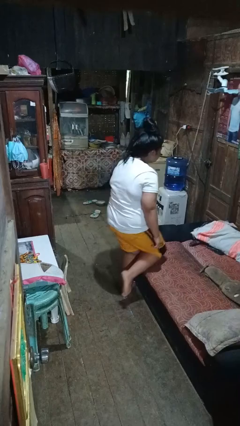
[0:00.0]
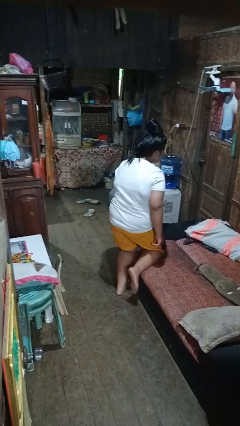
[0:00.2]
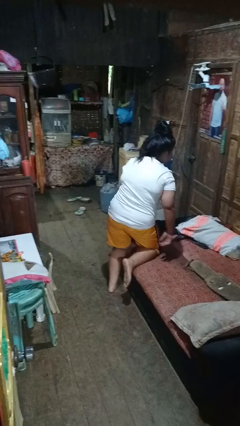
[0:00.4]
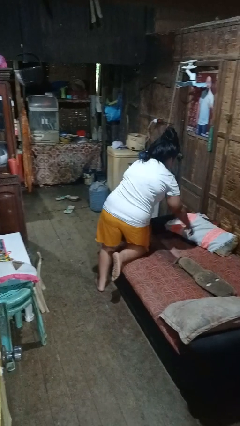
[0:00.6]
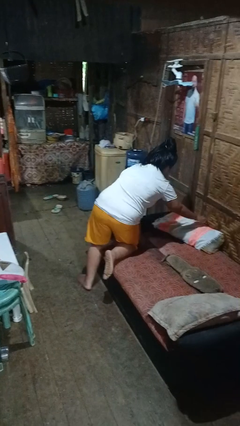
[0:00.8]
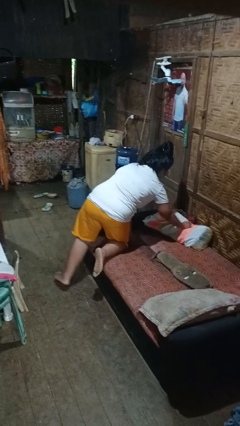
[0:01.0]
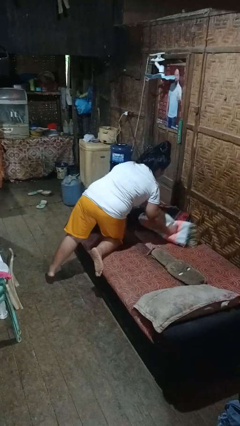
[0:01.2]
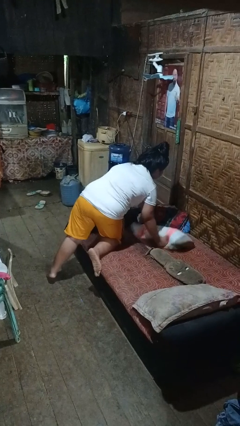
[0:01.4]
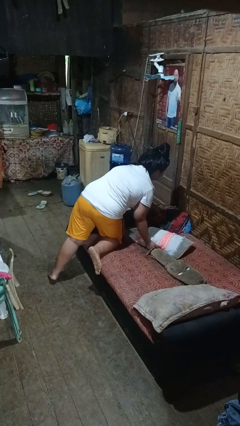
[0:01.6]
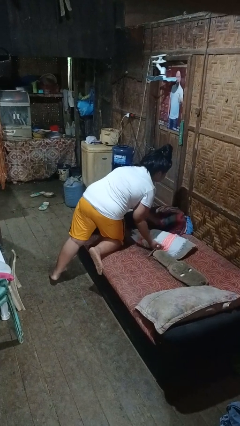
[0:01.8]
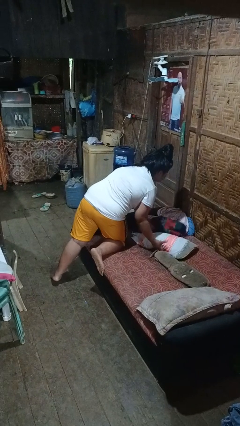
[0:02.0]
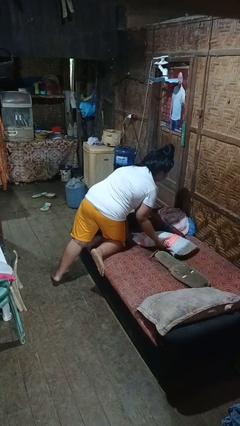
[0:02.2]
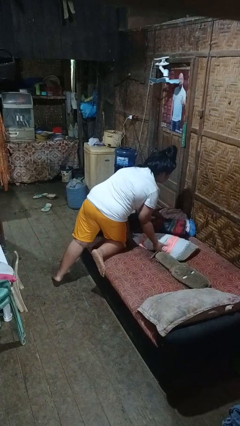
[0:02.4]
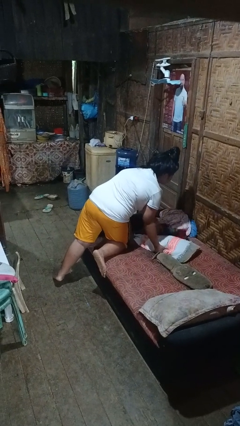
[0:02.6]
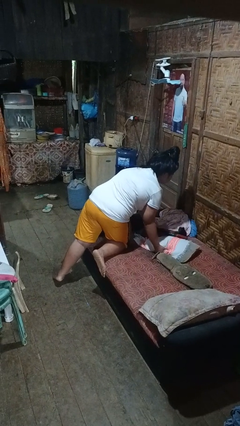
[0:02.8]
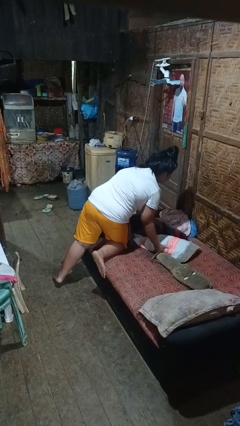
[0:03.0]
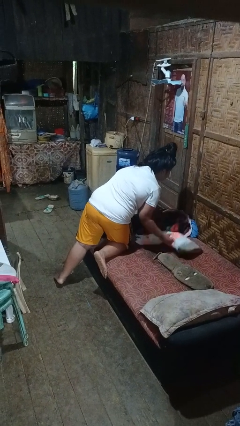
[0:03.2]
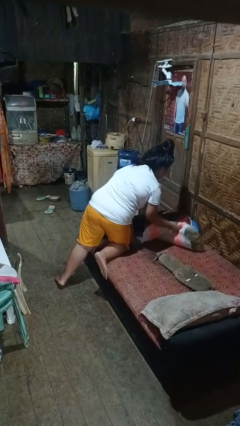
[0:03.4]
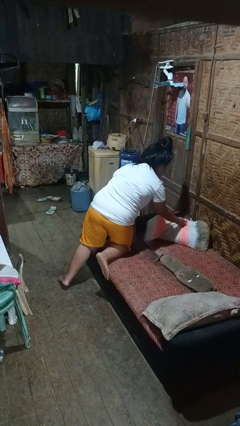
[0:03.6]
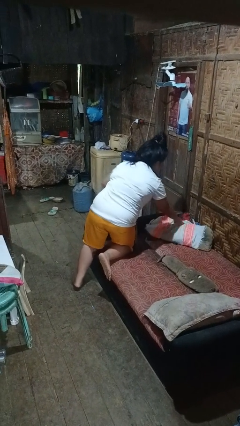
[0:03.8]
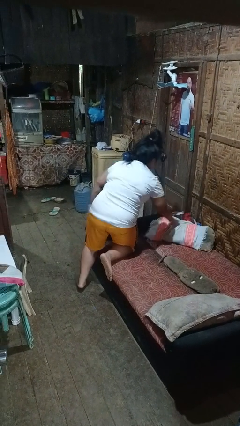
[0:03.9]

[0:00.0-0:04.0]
person searches in couch

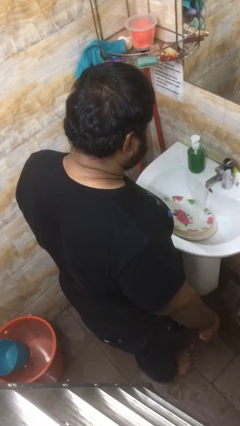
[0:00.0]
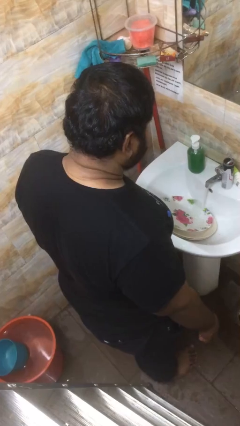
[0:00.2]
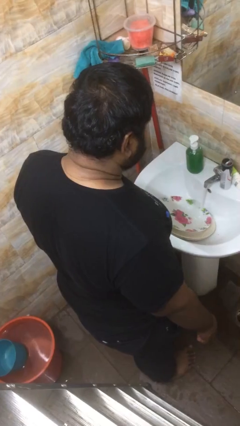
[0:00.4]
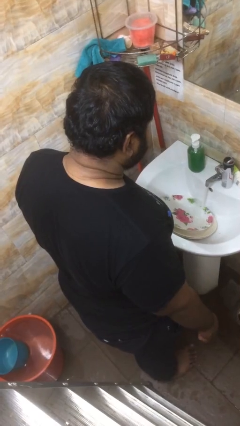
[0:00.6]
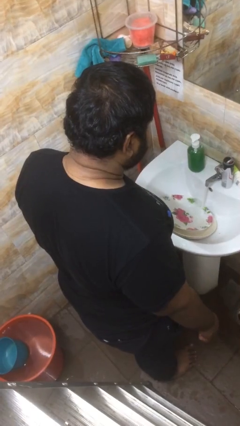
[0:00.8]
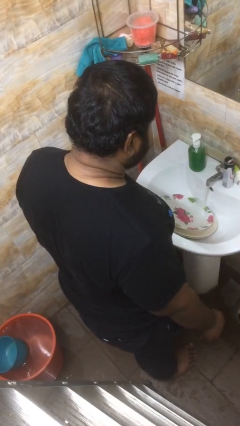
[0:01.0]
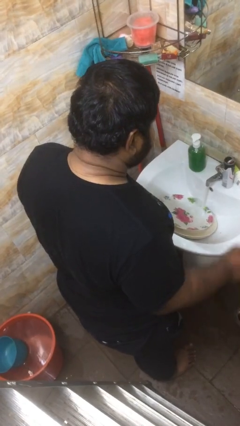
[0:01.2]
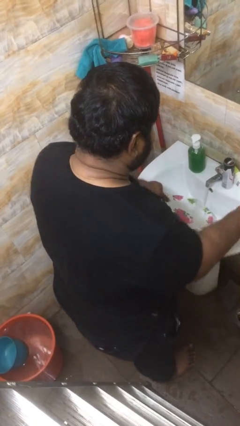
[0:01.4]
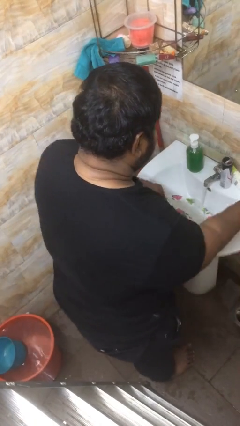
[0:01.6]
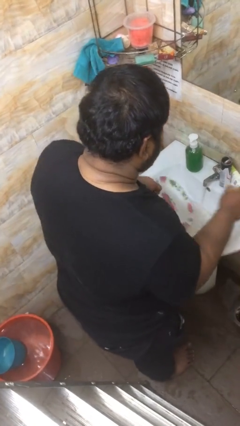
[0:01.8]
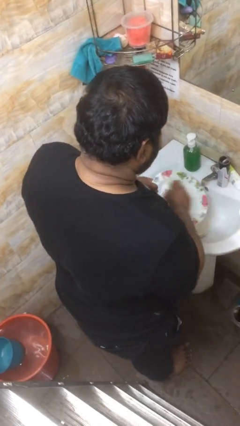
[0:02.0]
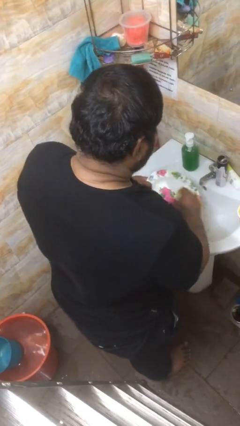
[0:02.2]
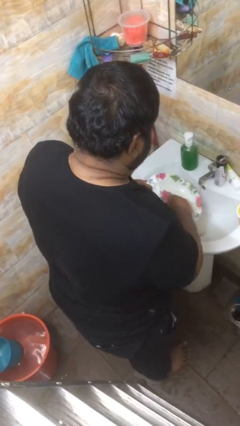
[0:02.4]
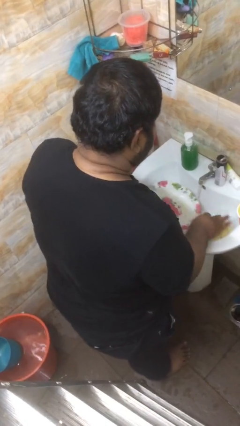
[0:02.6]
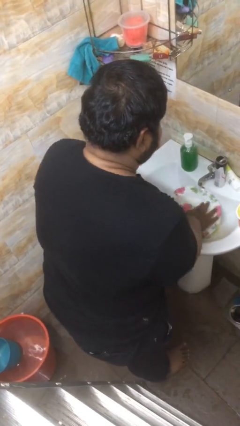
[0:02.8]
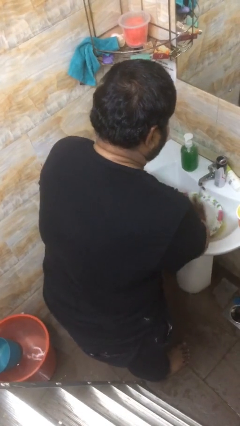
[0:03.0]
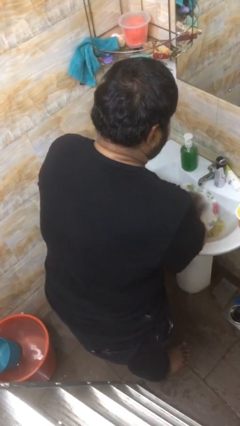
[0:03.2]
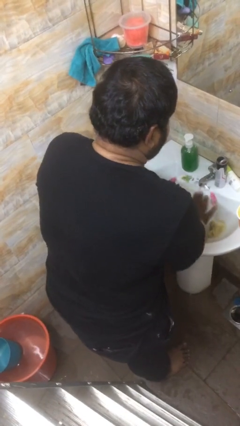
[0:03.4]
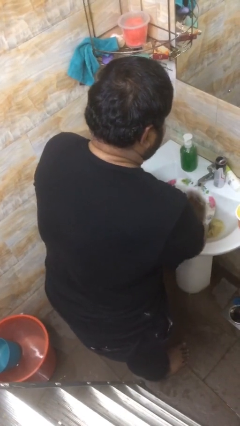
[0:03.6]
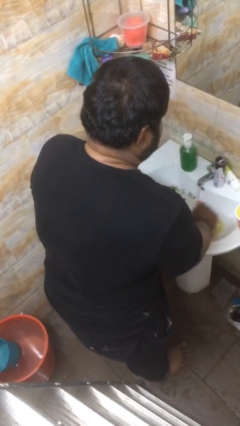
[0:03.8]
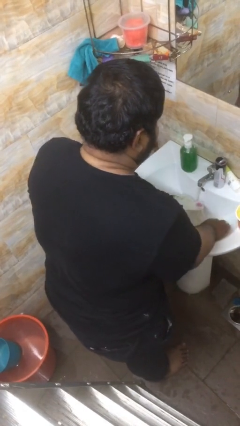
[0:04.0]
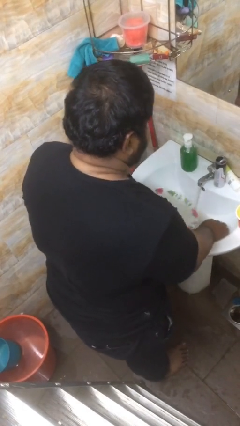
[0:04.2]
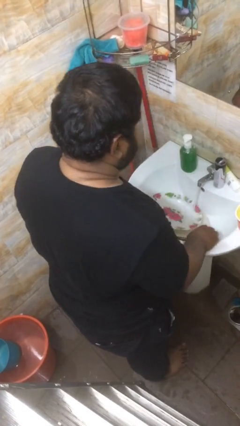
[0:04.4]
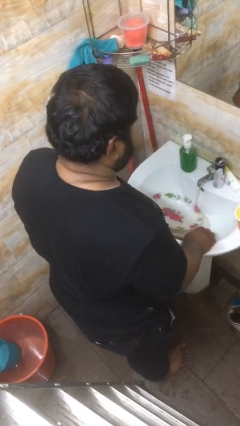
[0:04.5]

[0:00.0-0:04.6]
person washes dish

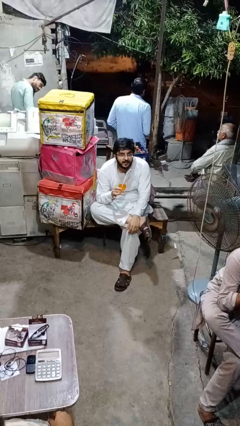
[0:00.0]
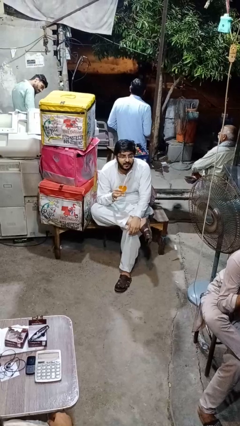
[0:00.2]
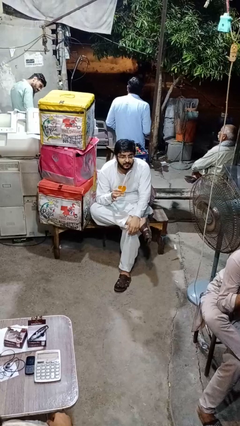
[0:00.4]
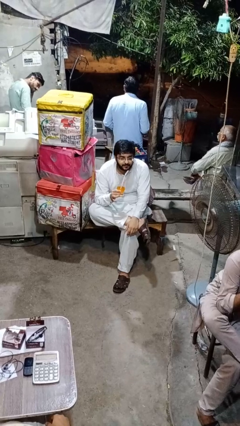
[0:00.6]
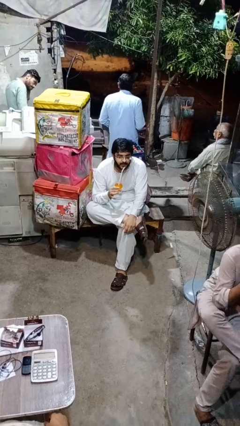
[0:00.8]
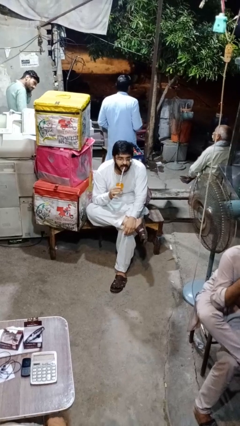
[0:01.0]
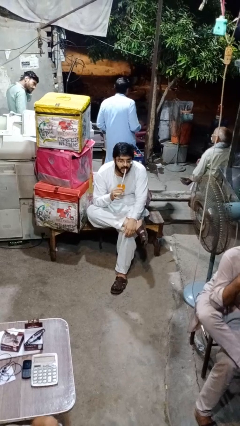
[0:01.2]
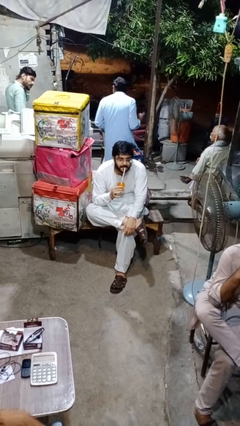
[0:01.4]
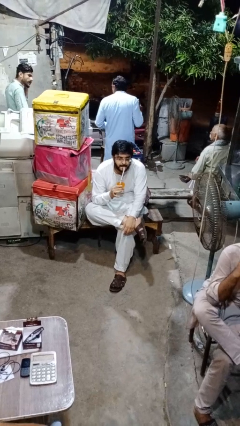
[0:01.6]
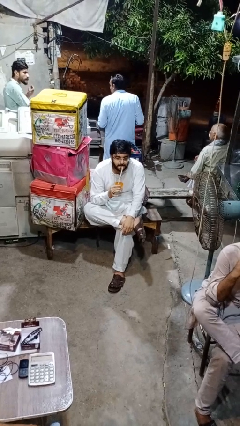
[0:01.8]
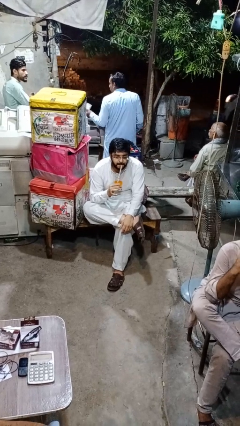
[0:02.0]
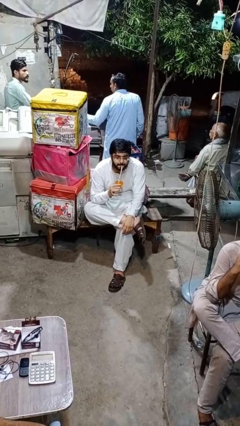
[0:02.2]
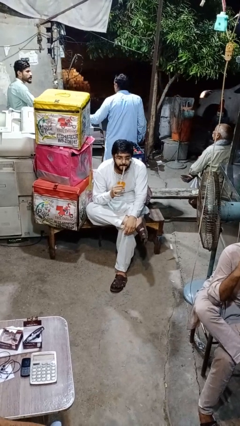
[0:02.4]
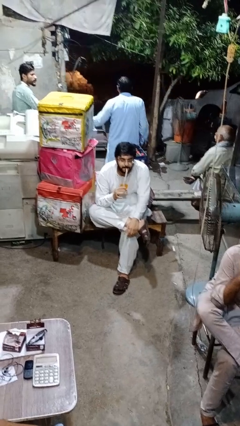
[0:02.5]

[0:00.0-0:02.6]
person drinks from straw

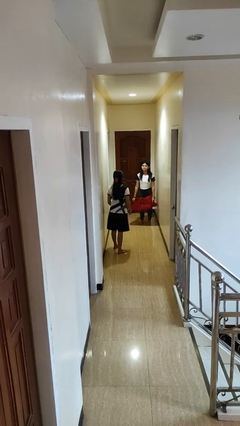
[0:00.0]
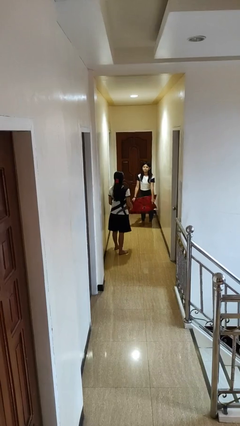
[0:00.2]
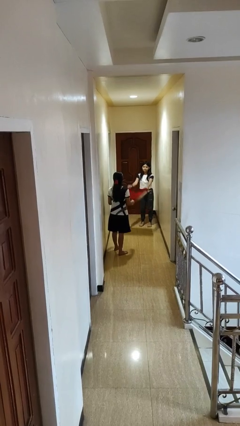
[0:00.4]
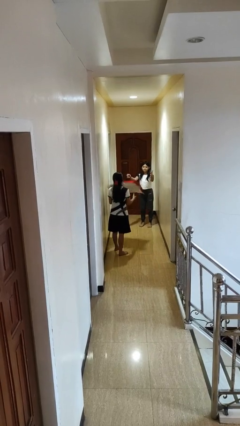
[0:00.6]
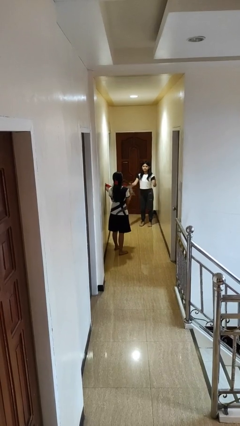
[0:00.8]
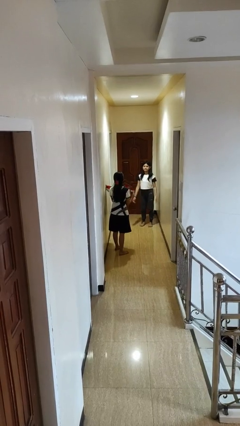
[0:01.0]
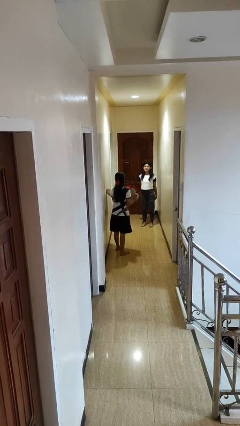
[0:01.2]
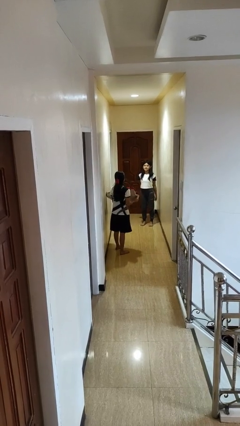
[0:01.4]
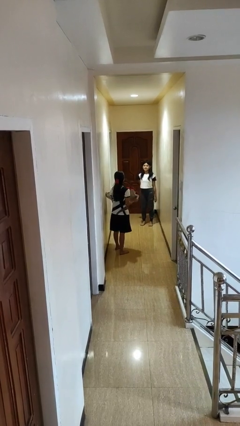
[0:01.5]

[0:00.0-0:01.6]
person catches object from person

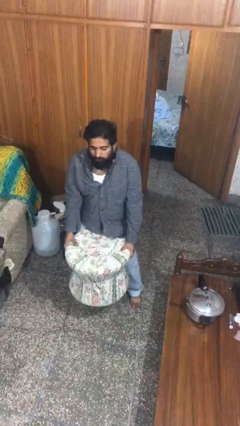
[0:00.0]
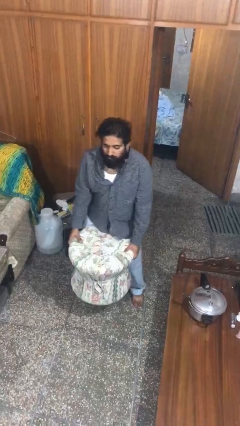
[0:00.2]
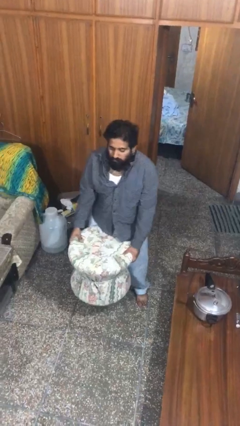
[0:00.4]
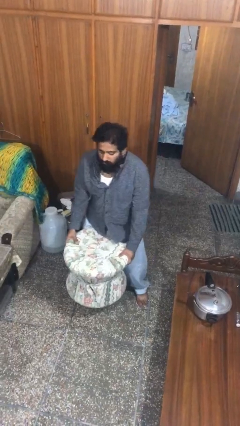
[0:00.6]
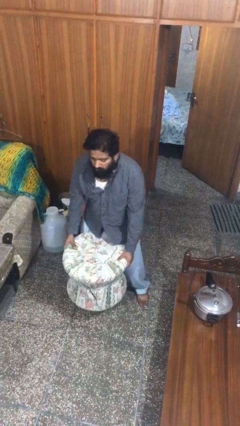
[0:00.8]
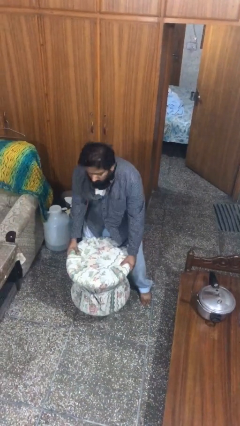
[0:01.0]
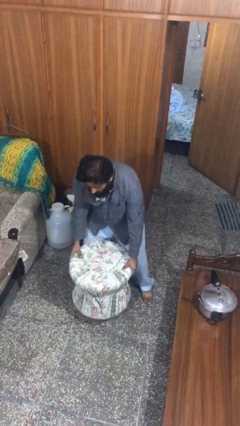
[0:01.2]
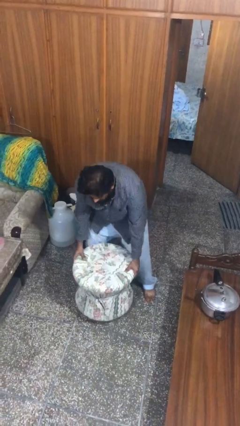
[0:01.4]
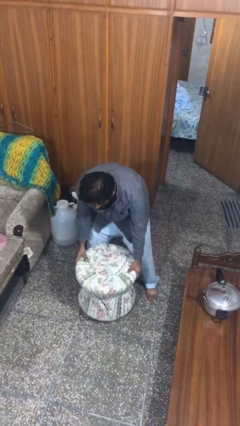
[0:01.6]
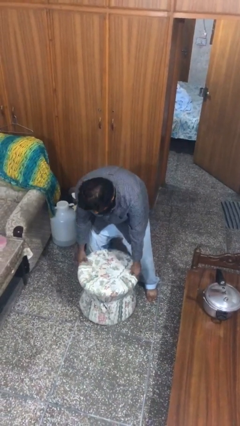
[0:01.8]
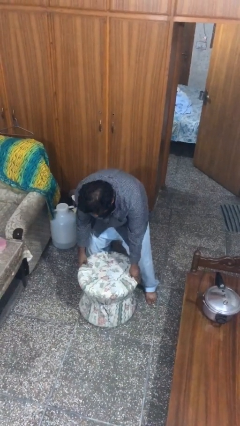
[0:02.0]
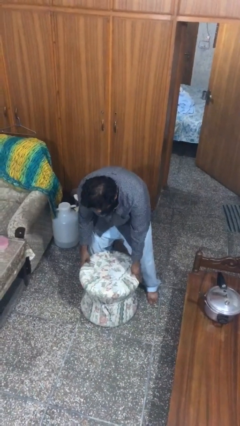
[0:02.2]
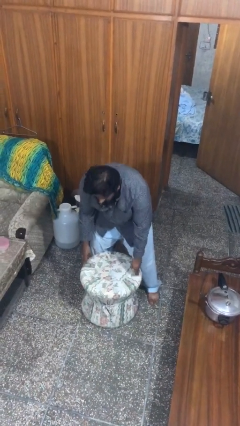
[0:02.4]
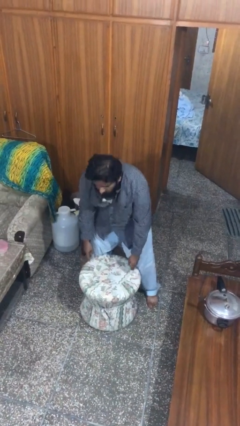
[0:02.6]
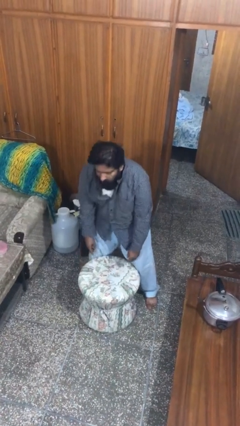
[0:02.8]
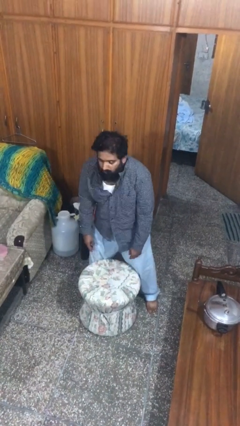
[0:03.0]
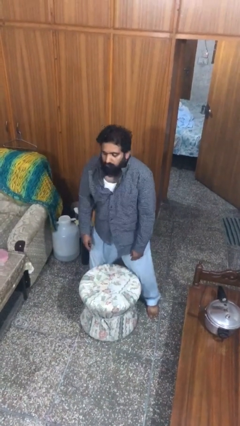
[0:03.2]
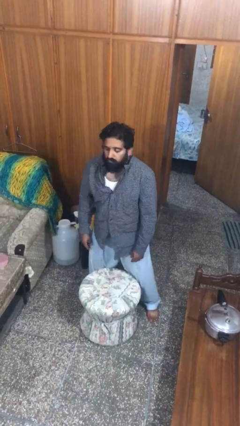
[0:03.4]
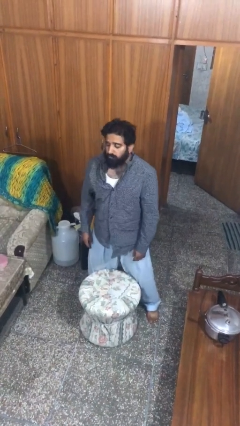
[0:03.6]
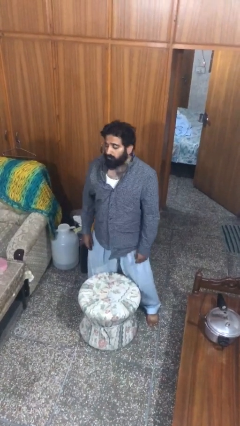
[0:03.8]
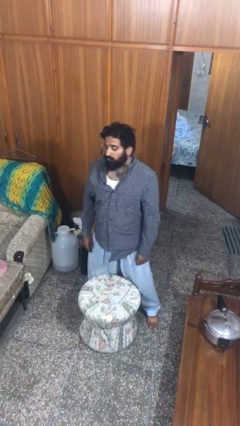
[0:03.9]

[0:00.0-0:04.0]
person puts down object on floor

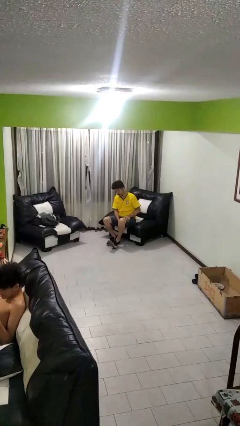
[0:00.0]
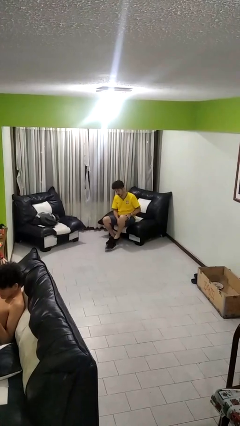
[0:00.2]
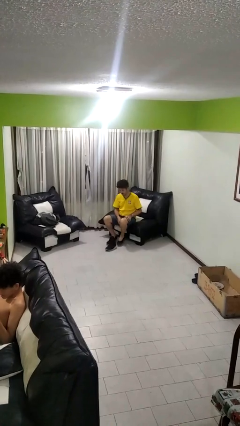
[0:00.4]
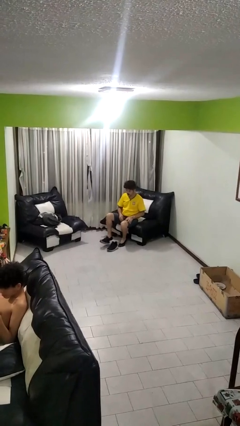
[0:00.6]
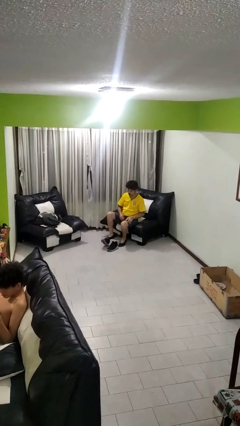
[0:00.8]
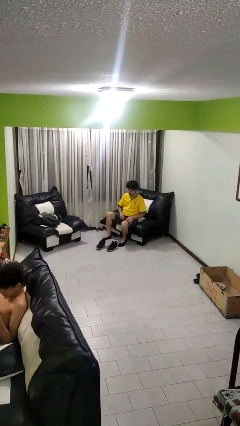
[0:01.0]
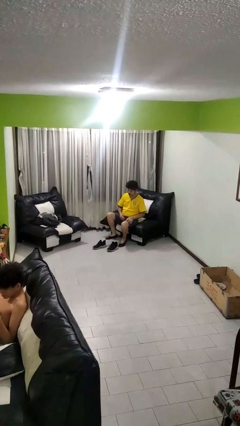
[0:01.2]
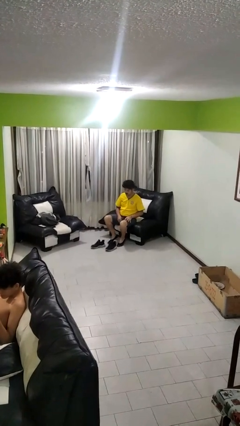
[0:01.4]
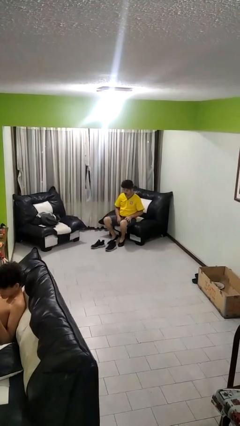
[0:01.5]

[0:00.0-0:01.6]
person takes off shoes
